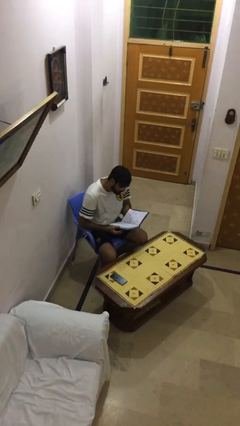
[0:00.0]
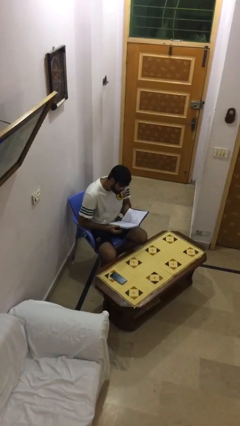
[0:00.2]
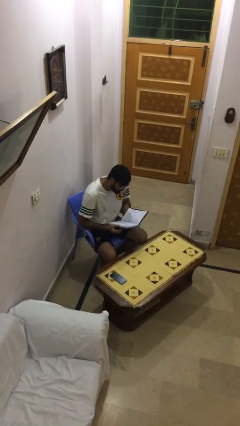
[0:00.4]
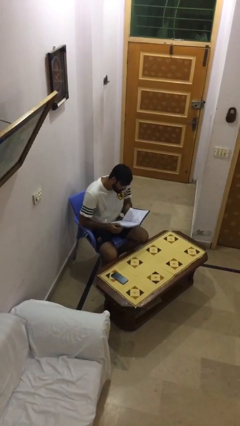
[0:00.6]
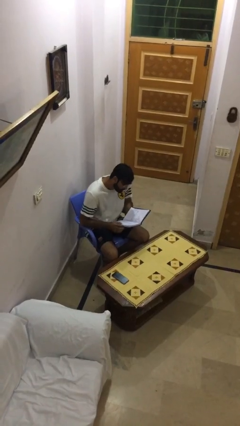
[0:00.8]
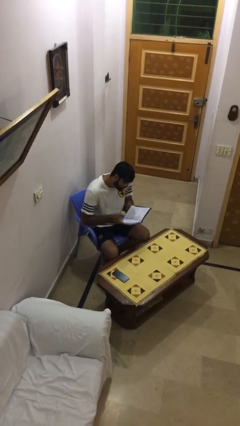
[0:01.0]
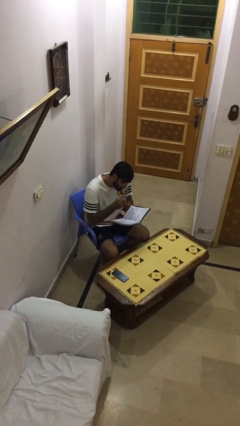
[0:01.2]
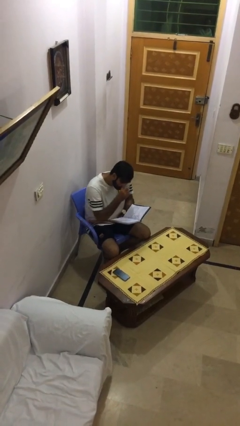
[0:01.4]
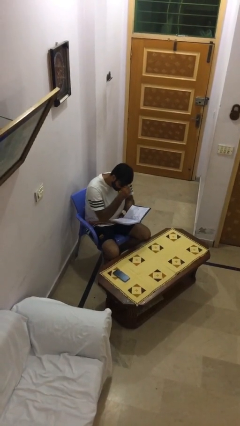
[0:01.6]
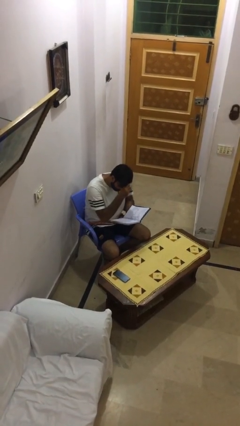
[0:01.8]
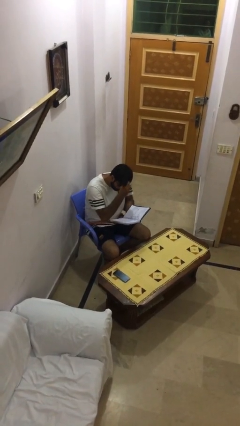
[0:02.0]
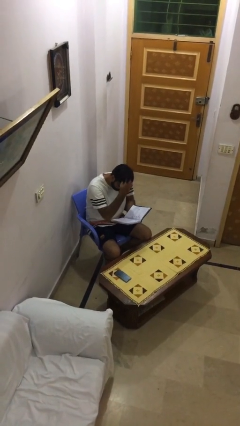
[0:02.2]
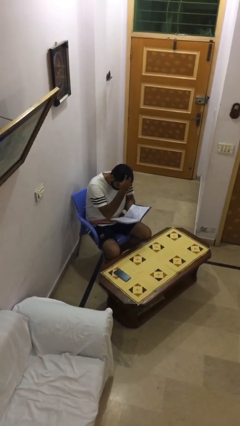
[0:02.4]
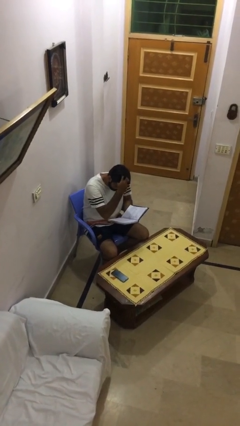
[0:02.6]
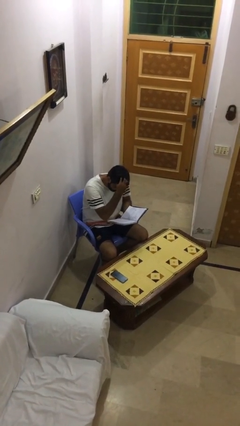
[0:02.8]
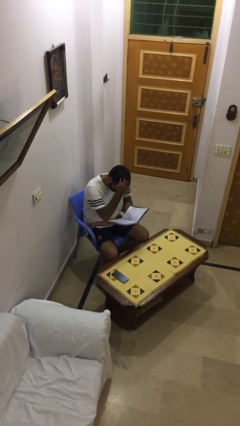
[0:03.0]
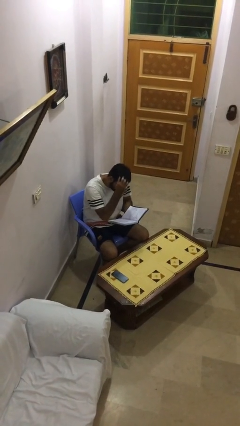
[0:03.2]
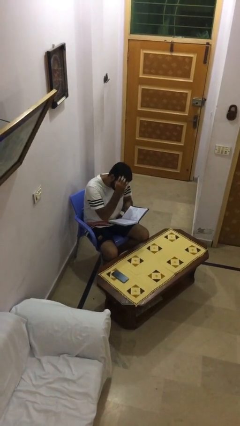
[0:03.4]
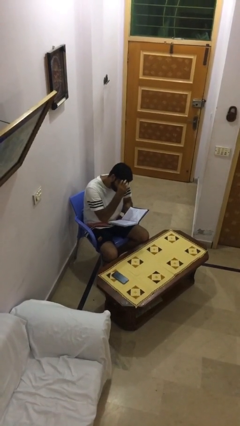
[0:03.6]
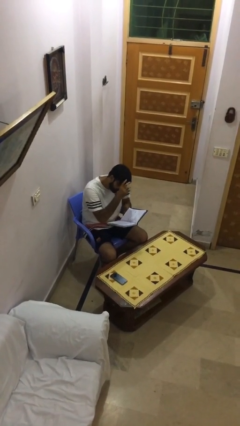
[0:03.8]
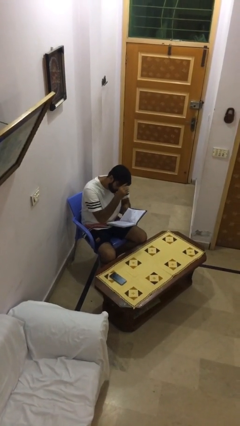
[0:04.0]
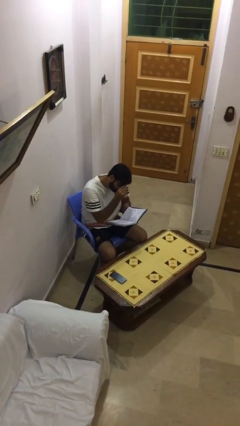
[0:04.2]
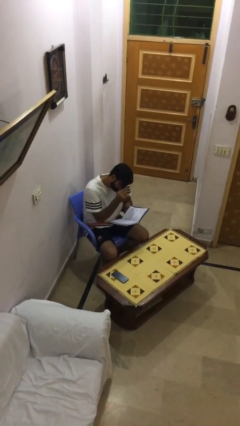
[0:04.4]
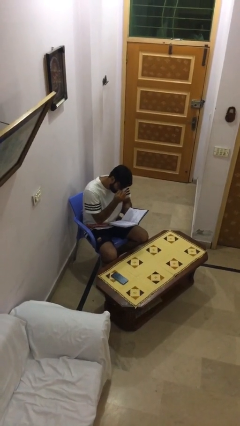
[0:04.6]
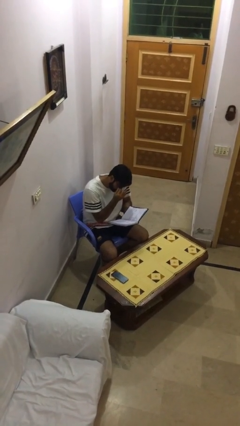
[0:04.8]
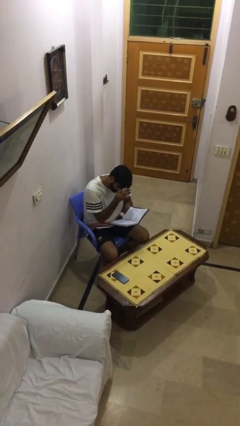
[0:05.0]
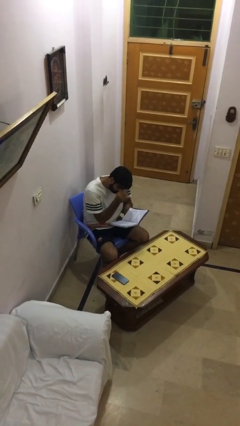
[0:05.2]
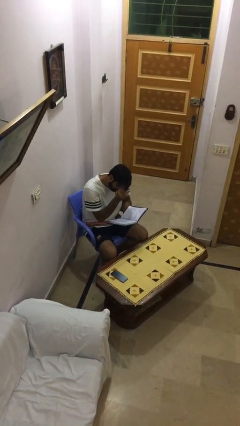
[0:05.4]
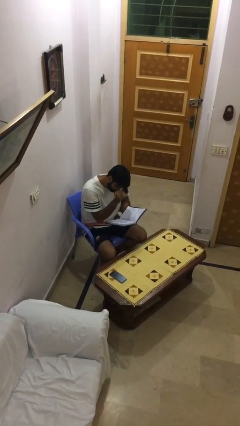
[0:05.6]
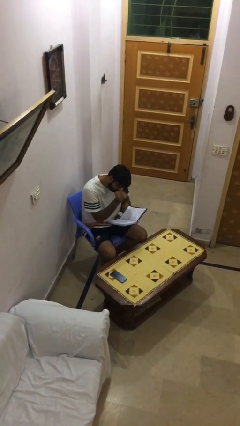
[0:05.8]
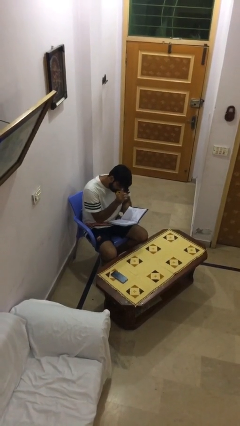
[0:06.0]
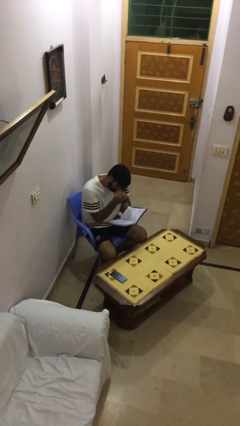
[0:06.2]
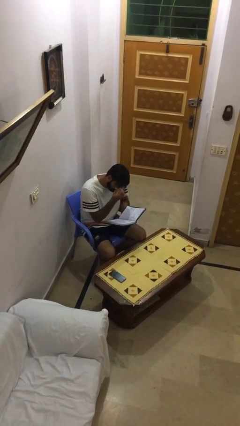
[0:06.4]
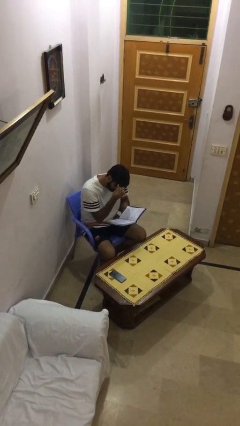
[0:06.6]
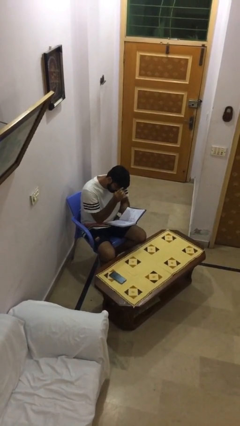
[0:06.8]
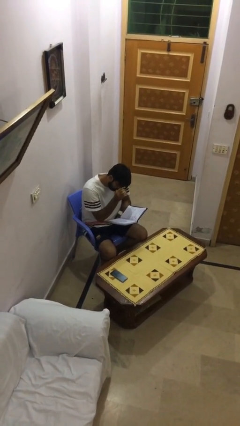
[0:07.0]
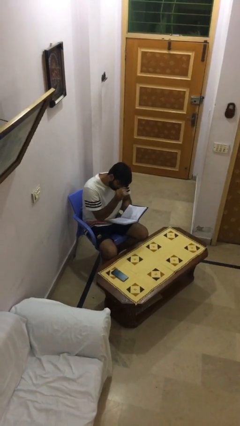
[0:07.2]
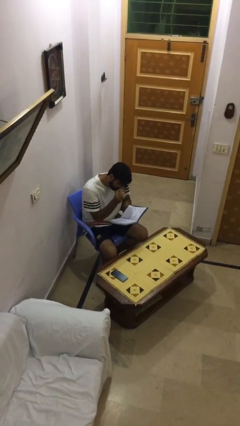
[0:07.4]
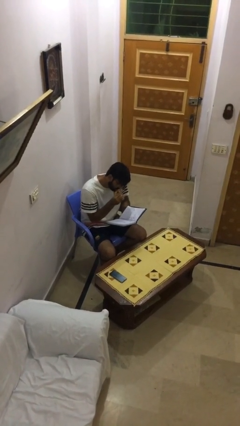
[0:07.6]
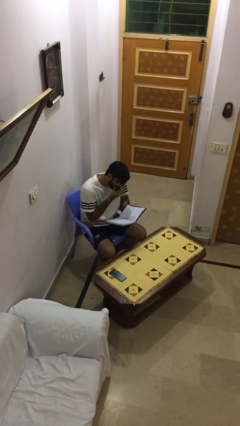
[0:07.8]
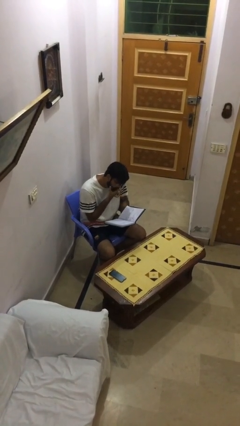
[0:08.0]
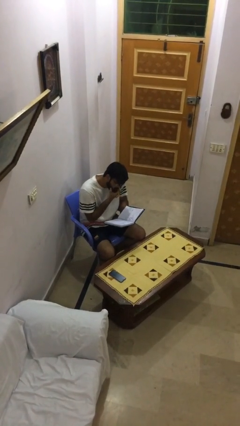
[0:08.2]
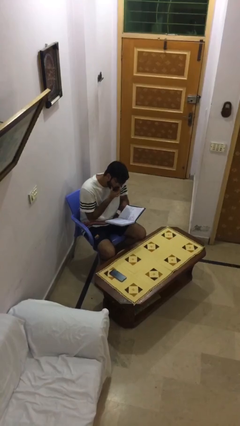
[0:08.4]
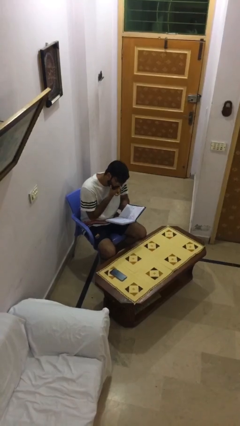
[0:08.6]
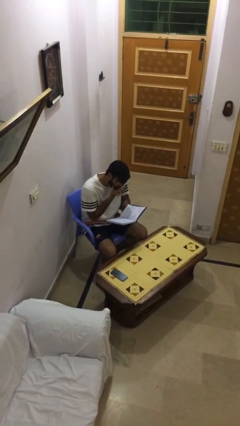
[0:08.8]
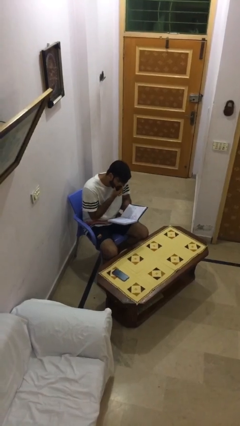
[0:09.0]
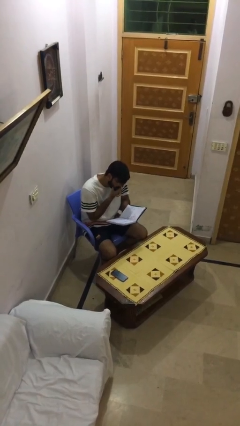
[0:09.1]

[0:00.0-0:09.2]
person reads document

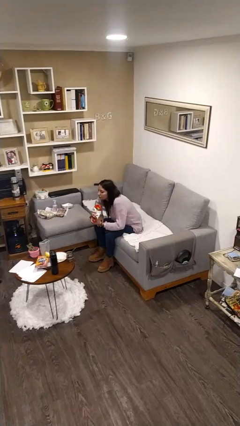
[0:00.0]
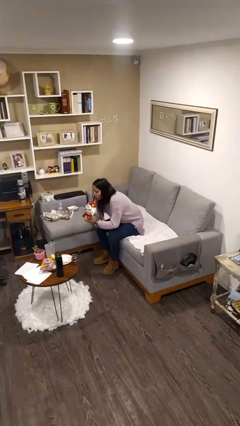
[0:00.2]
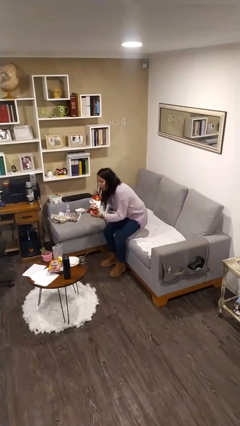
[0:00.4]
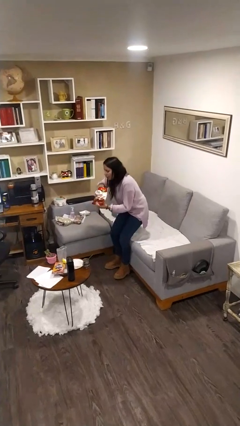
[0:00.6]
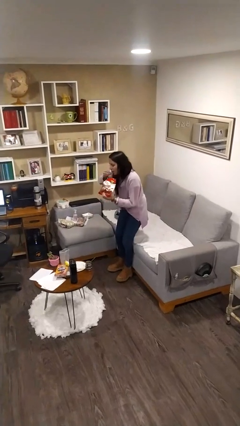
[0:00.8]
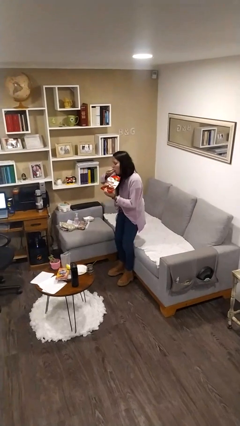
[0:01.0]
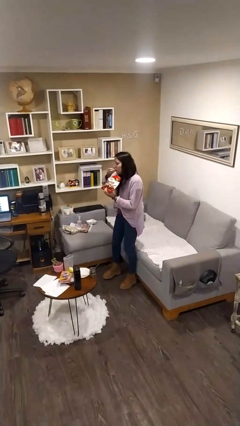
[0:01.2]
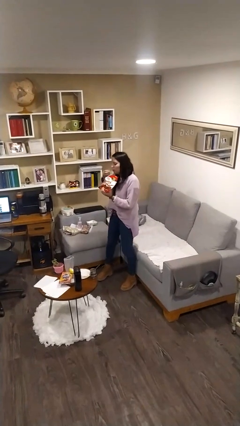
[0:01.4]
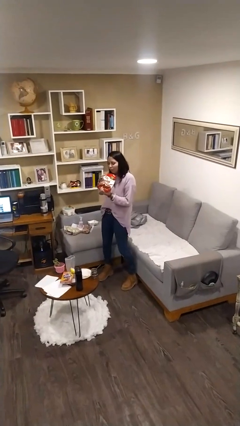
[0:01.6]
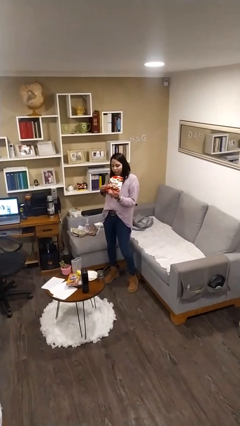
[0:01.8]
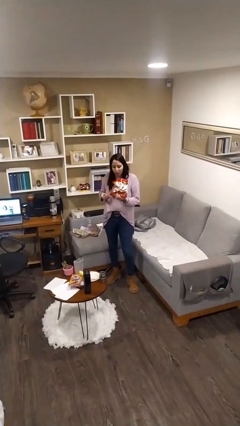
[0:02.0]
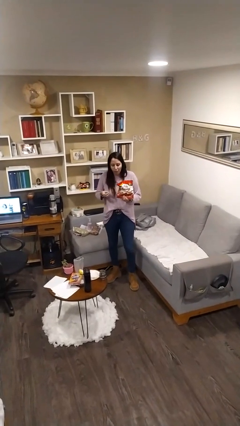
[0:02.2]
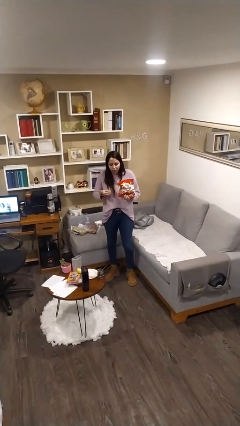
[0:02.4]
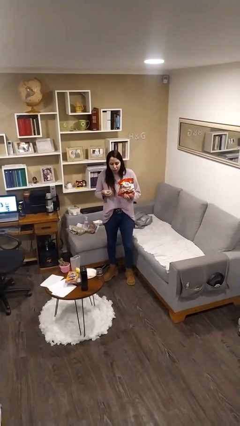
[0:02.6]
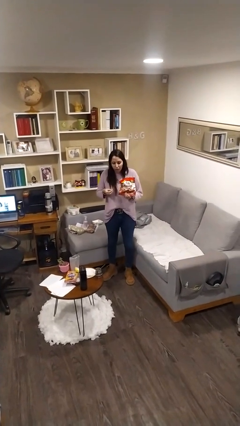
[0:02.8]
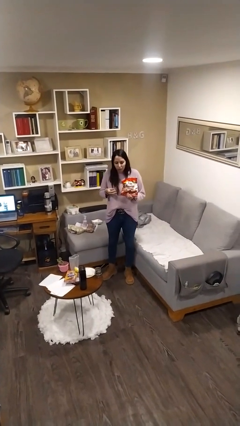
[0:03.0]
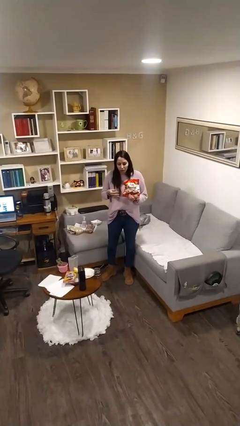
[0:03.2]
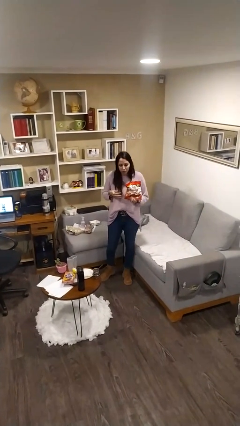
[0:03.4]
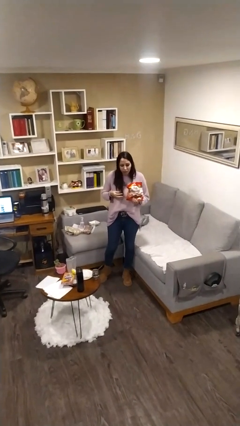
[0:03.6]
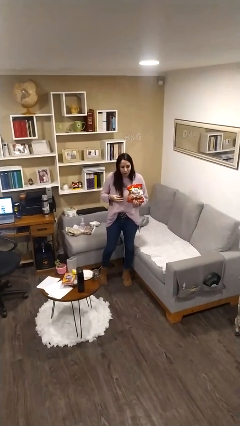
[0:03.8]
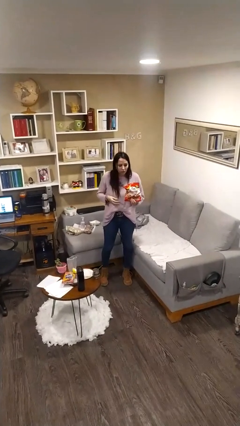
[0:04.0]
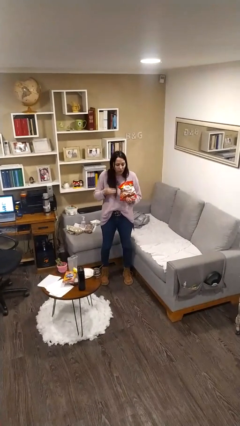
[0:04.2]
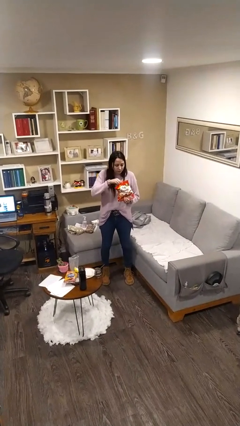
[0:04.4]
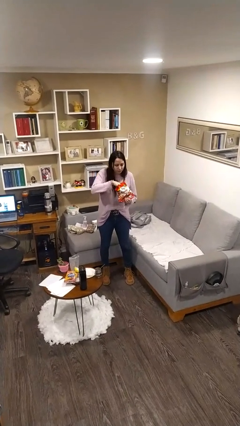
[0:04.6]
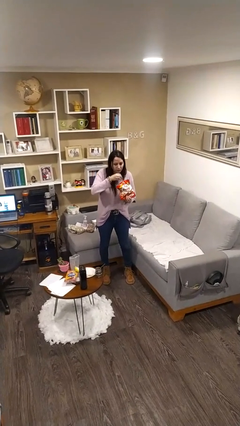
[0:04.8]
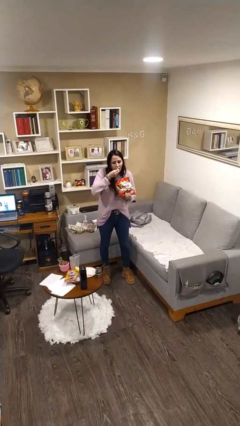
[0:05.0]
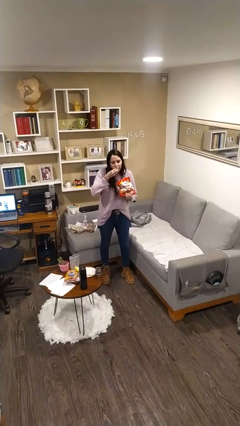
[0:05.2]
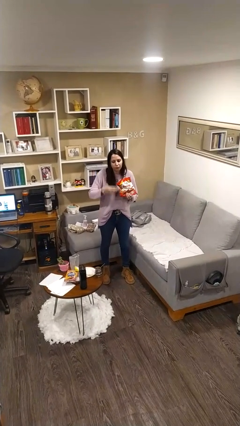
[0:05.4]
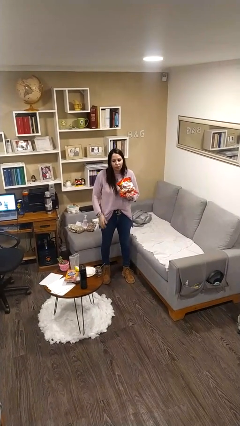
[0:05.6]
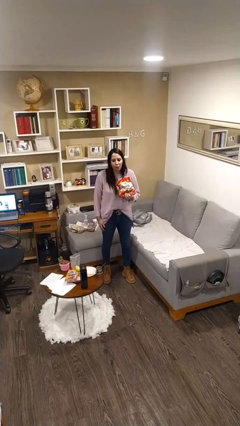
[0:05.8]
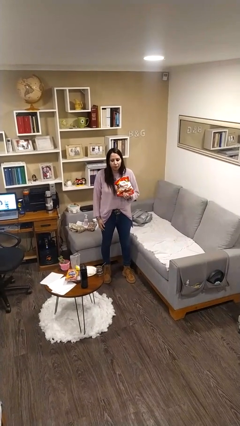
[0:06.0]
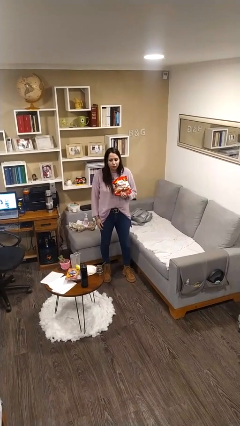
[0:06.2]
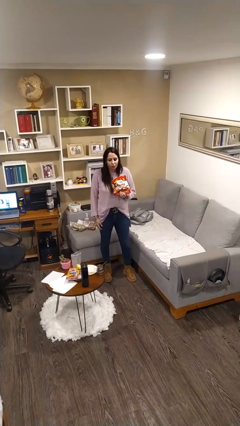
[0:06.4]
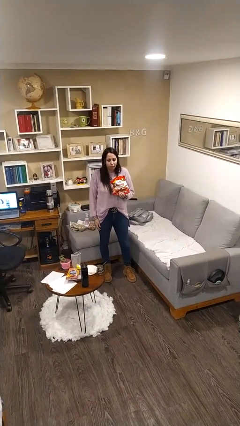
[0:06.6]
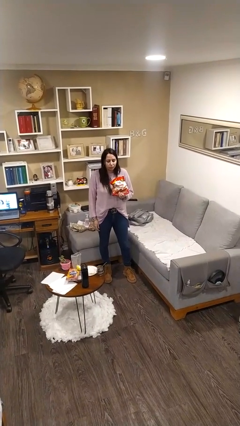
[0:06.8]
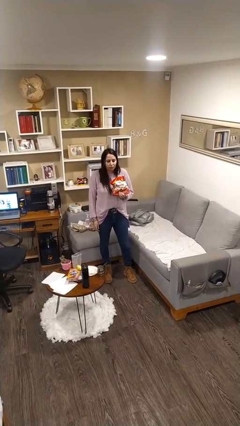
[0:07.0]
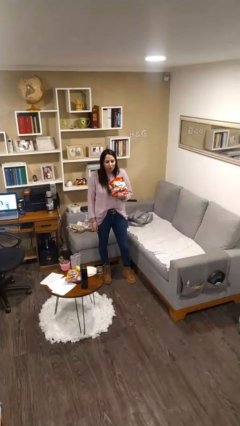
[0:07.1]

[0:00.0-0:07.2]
person eats snack from bag

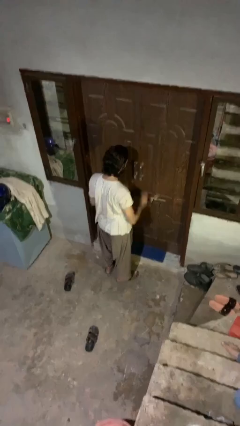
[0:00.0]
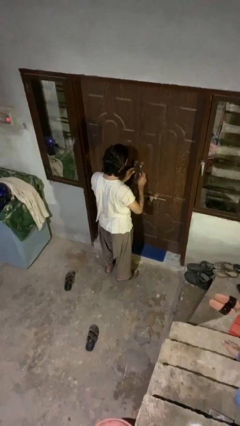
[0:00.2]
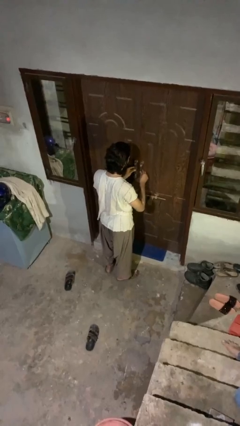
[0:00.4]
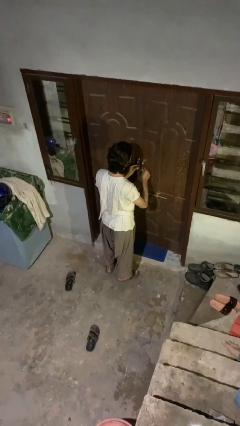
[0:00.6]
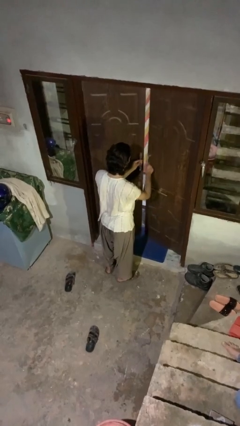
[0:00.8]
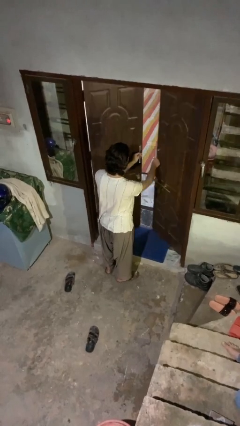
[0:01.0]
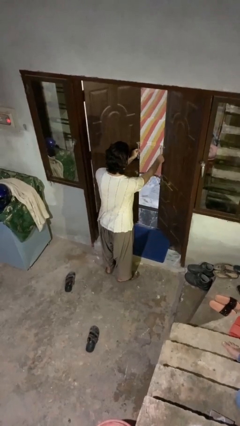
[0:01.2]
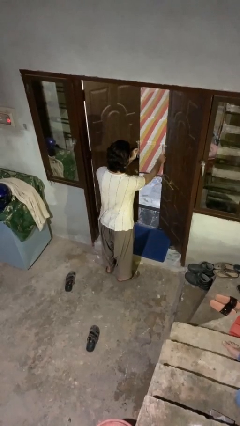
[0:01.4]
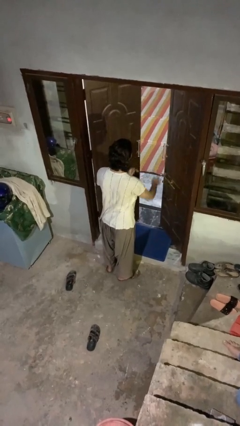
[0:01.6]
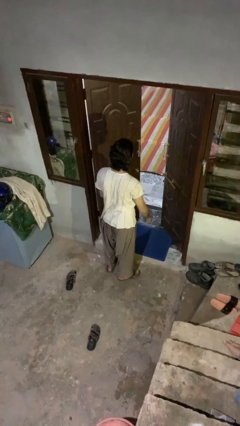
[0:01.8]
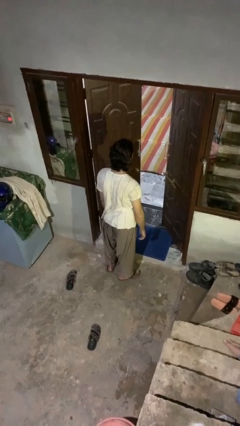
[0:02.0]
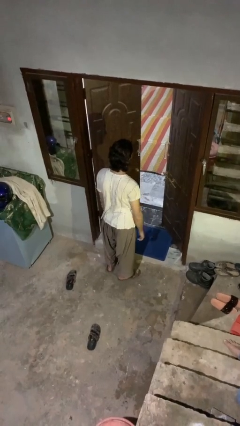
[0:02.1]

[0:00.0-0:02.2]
person opens facility door
